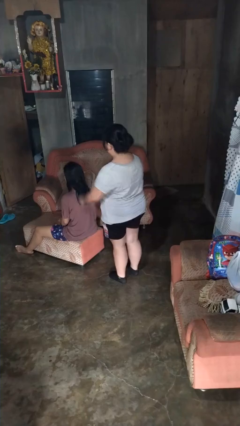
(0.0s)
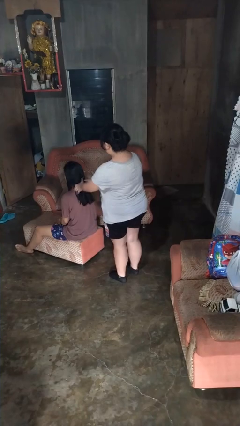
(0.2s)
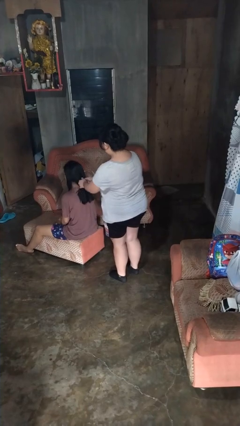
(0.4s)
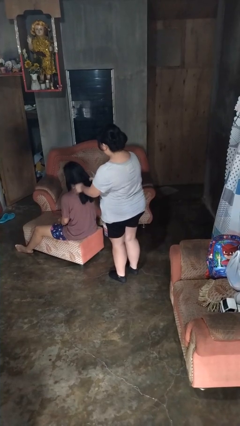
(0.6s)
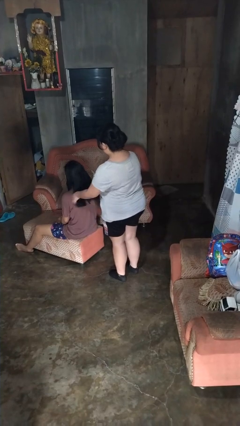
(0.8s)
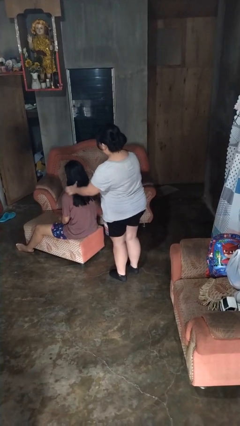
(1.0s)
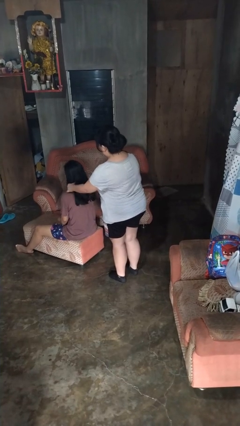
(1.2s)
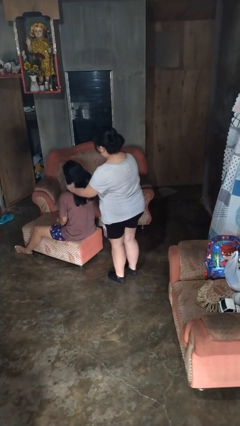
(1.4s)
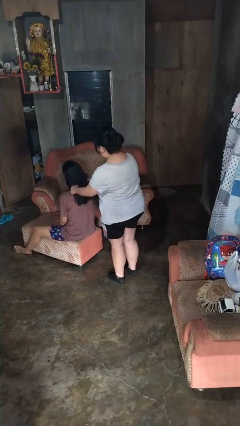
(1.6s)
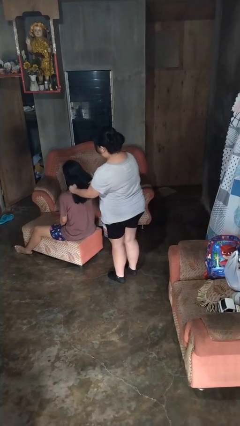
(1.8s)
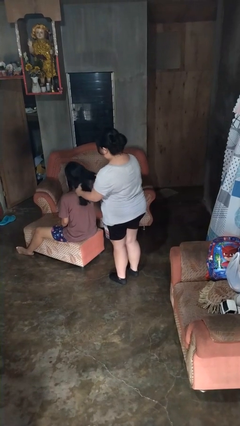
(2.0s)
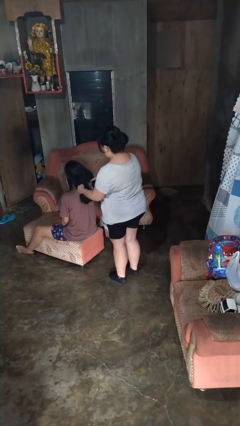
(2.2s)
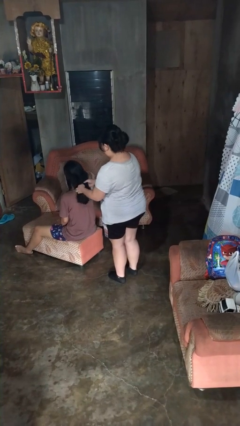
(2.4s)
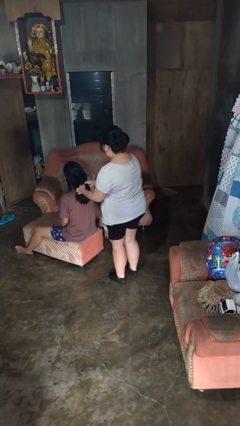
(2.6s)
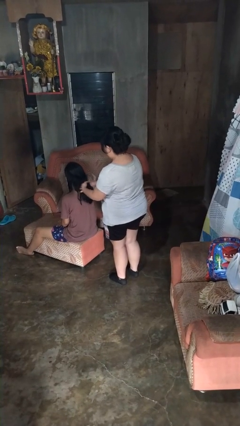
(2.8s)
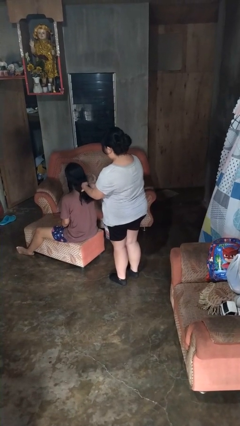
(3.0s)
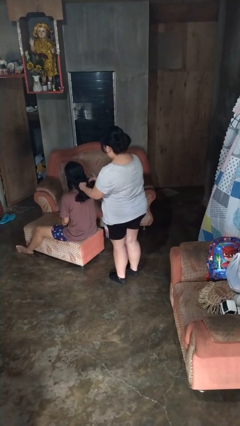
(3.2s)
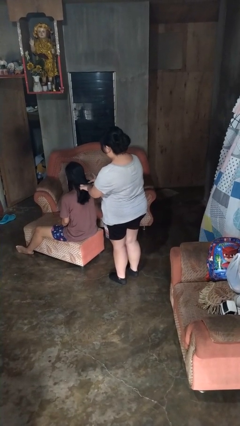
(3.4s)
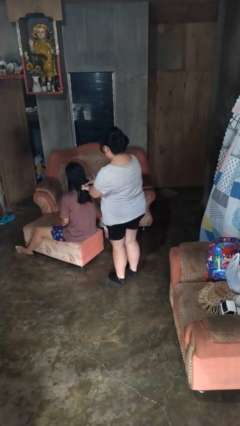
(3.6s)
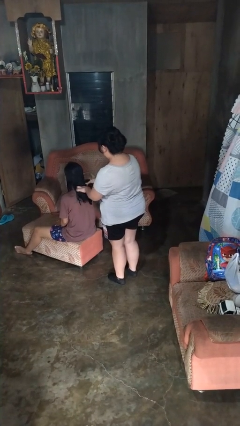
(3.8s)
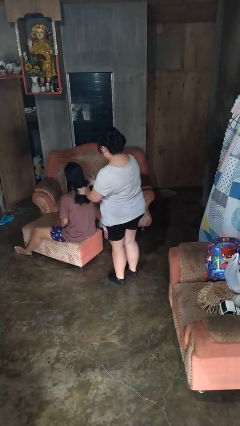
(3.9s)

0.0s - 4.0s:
person braids hair of person

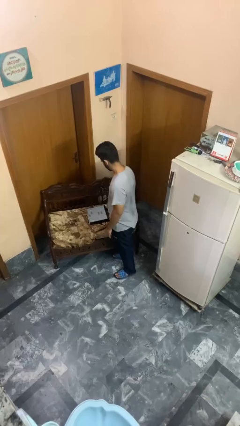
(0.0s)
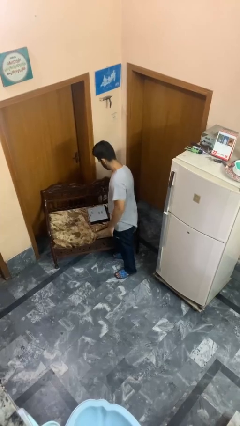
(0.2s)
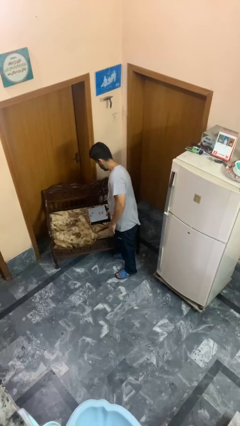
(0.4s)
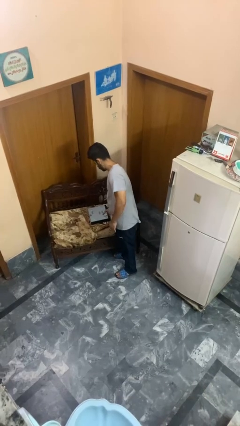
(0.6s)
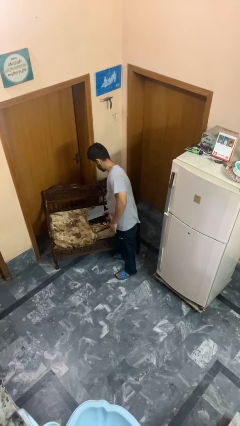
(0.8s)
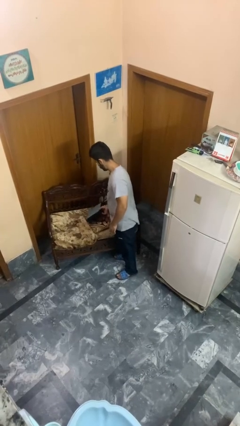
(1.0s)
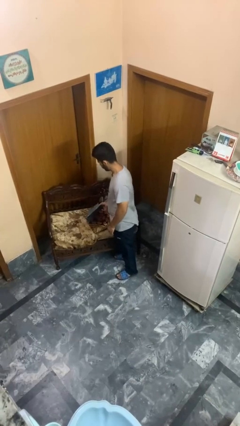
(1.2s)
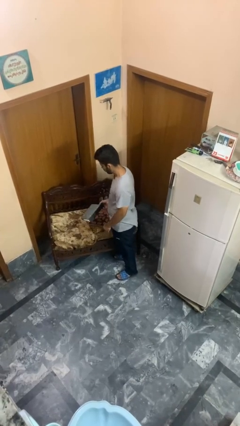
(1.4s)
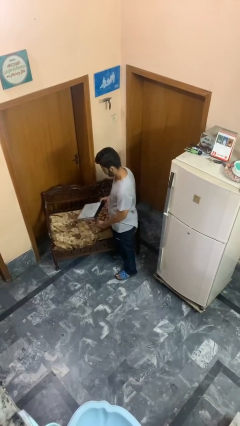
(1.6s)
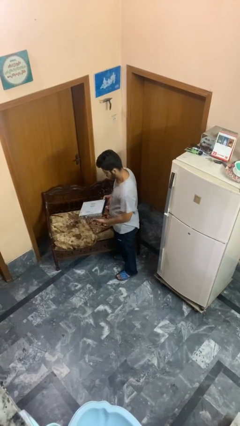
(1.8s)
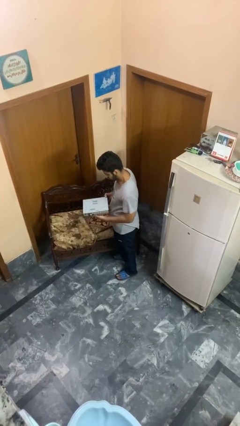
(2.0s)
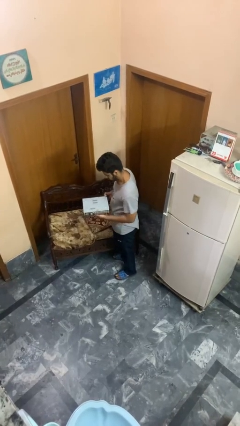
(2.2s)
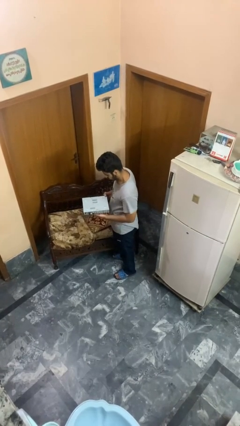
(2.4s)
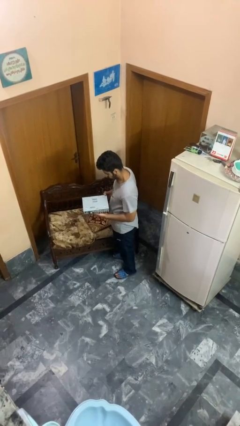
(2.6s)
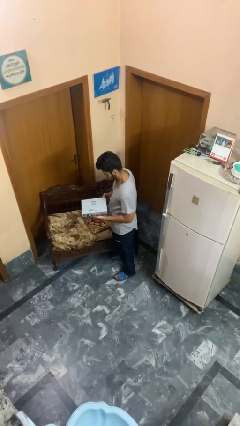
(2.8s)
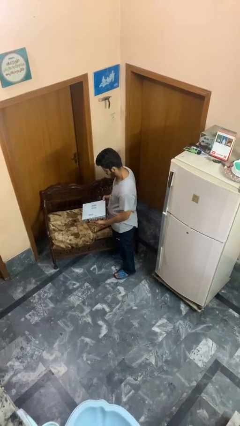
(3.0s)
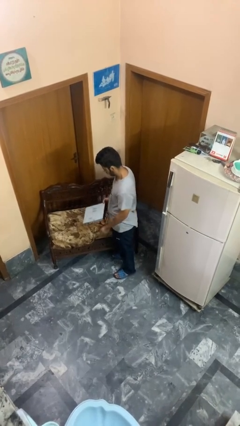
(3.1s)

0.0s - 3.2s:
person picks up object from couch

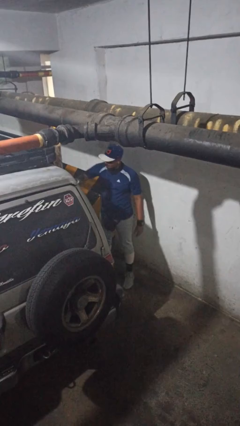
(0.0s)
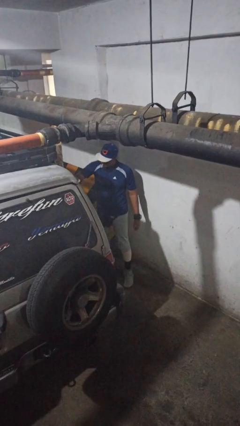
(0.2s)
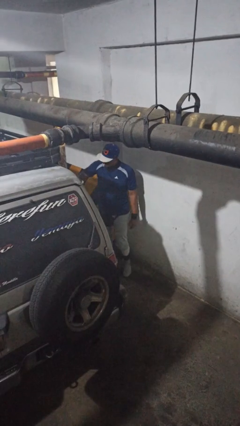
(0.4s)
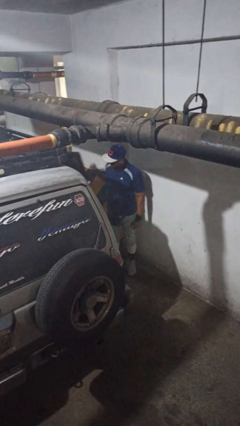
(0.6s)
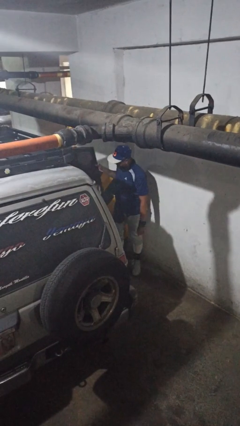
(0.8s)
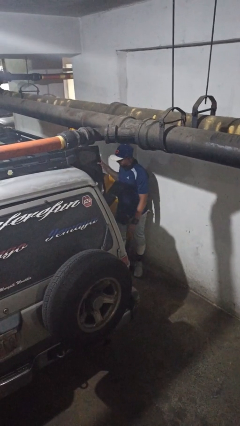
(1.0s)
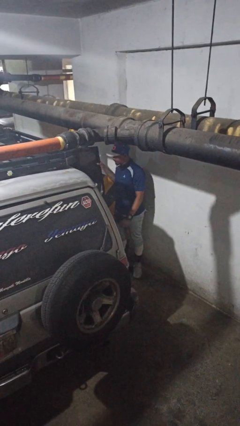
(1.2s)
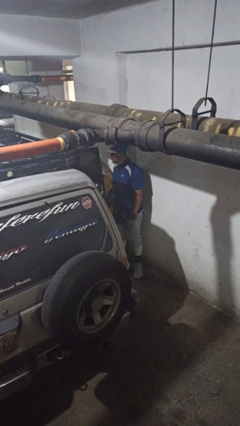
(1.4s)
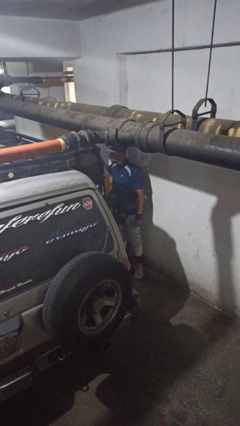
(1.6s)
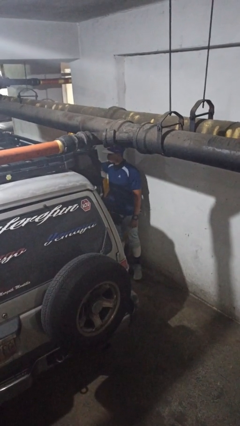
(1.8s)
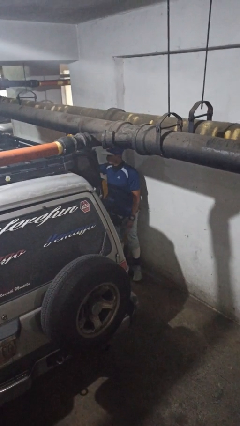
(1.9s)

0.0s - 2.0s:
person opens car door

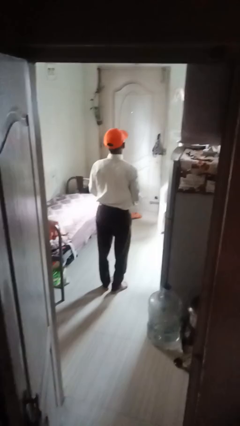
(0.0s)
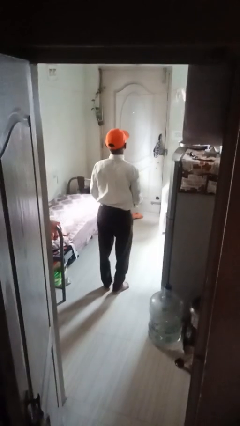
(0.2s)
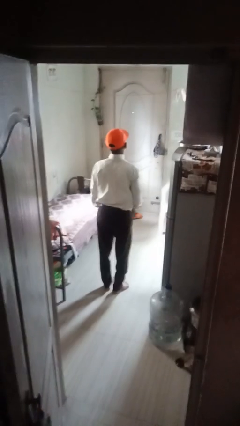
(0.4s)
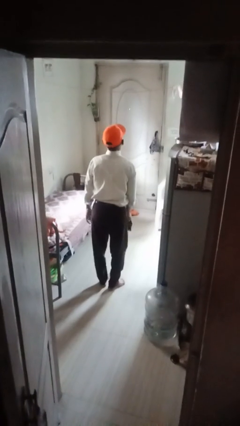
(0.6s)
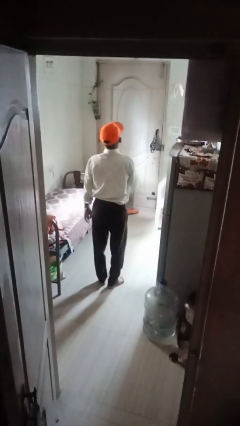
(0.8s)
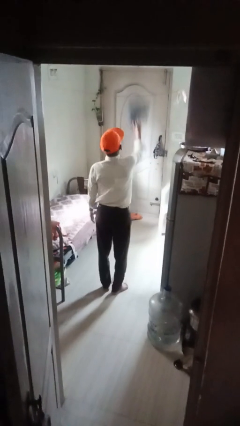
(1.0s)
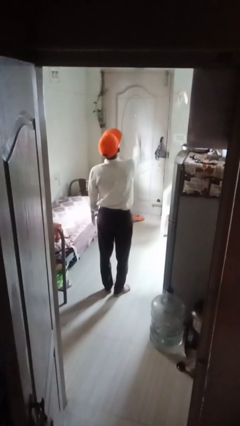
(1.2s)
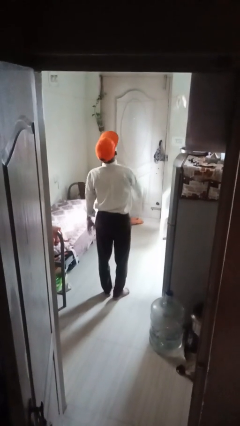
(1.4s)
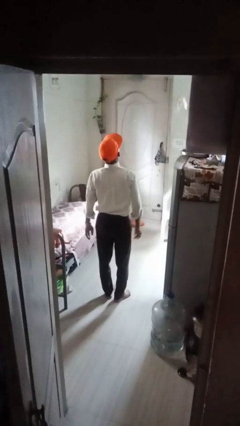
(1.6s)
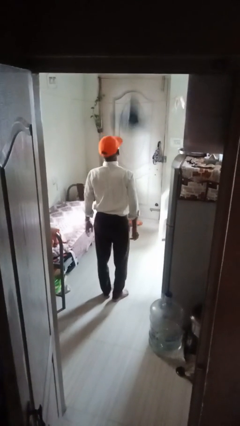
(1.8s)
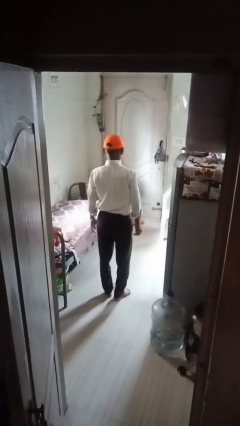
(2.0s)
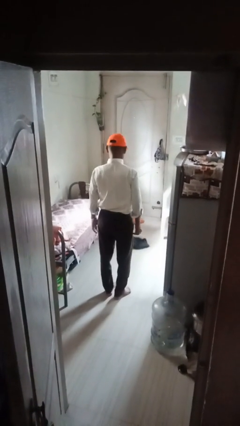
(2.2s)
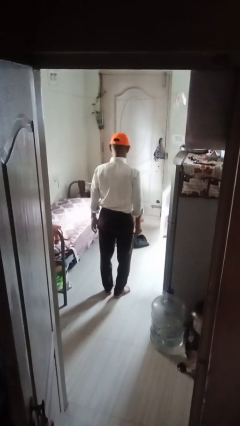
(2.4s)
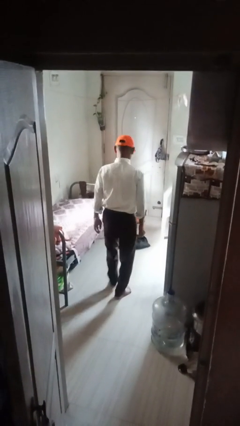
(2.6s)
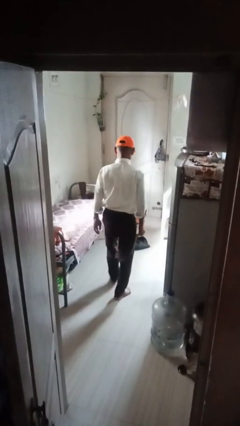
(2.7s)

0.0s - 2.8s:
person throws object into air

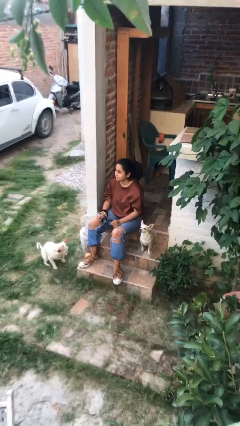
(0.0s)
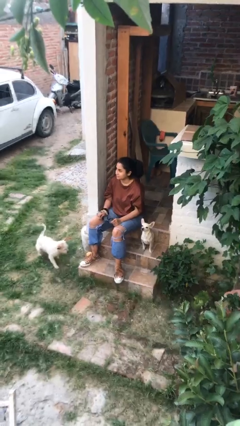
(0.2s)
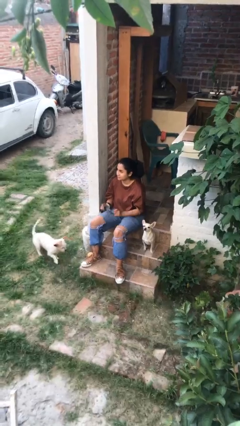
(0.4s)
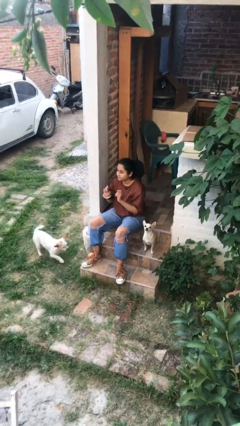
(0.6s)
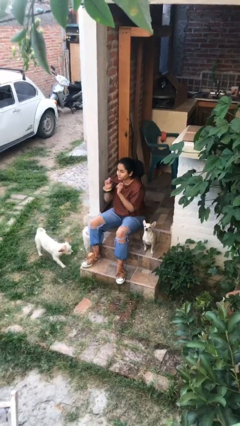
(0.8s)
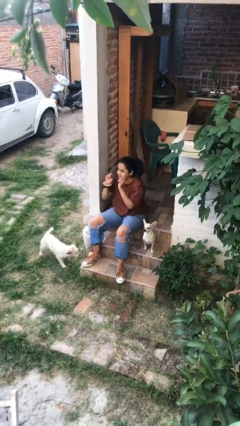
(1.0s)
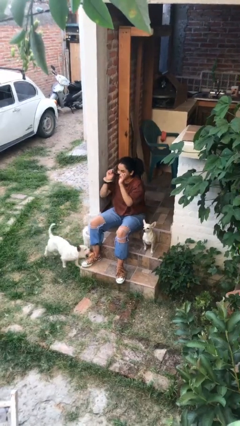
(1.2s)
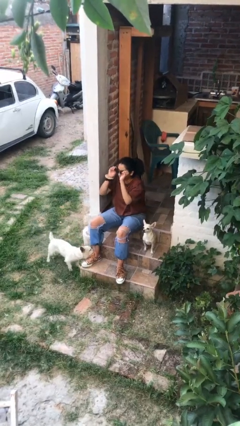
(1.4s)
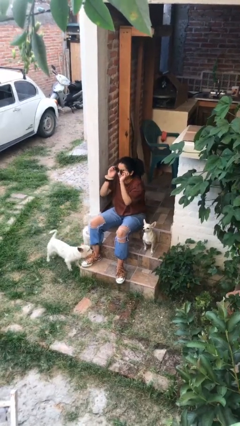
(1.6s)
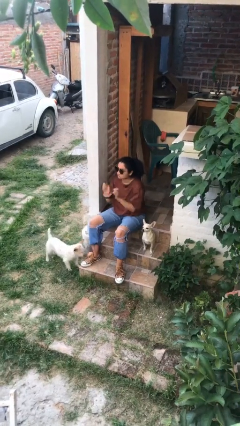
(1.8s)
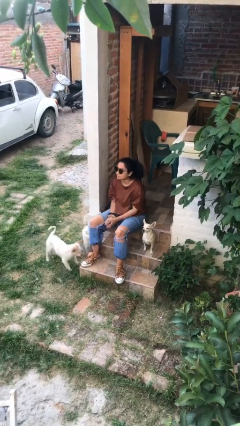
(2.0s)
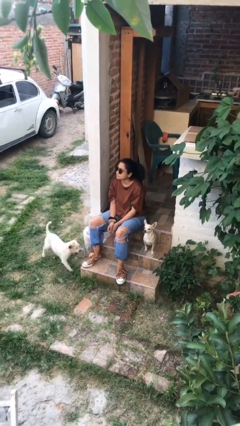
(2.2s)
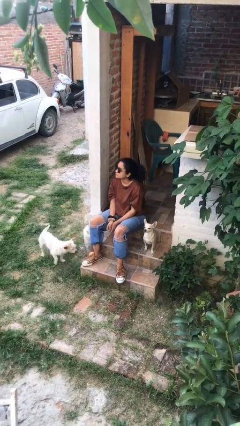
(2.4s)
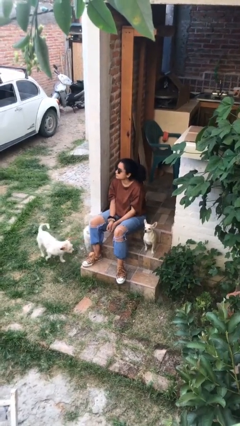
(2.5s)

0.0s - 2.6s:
person puts on sunglasses

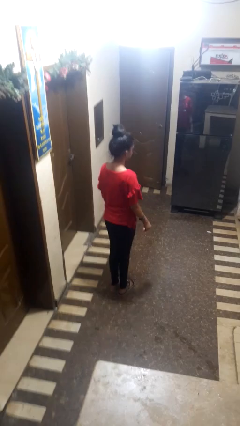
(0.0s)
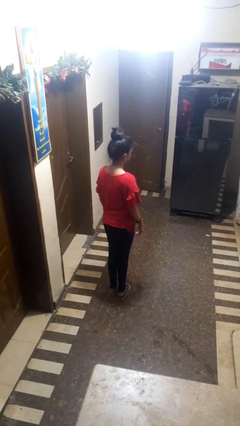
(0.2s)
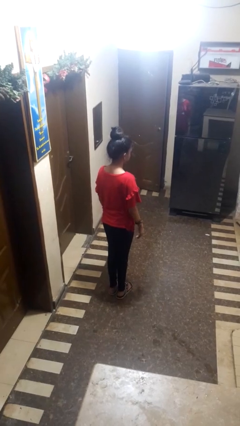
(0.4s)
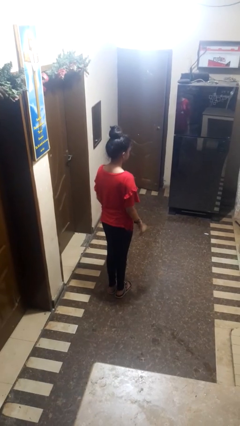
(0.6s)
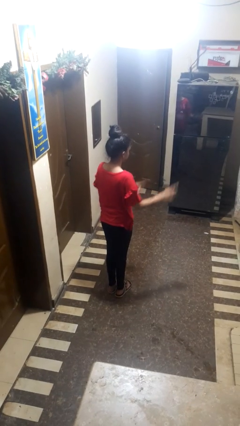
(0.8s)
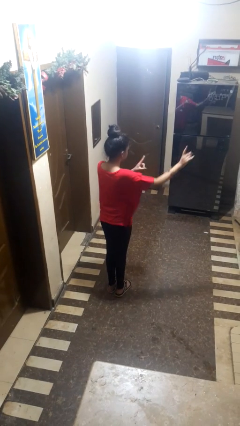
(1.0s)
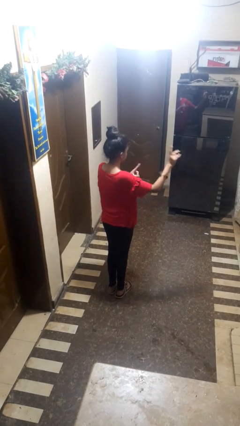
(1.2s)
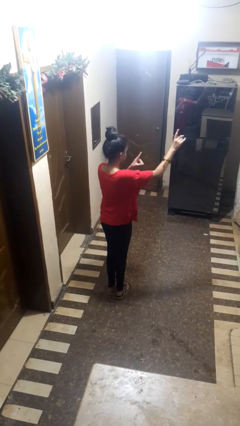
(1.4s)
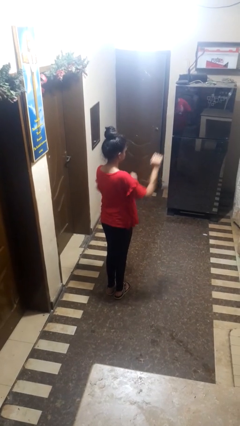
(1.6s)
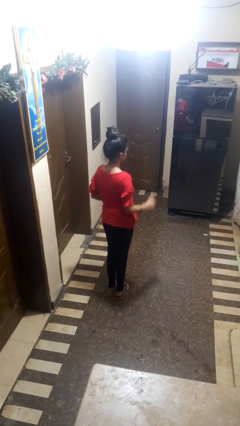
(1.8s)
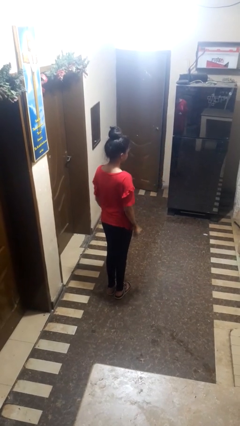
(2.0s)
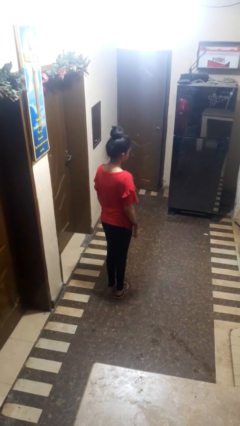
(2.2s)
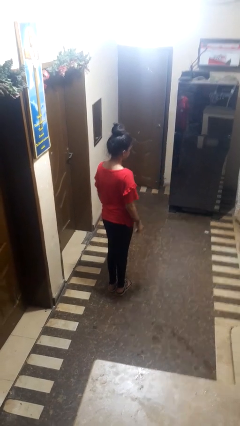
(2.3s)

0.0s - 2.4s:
person dances in place

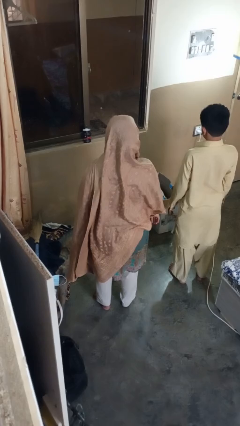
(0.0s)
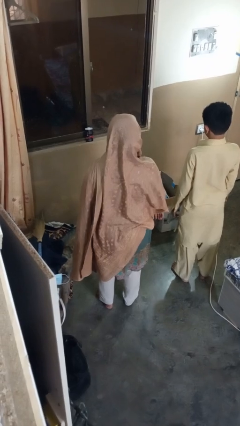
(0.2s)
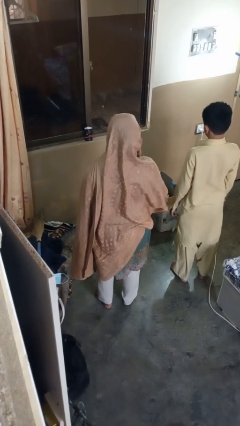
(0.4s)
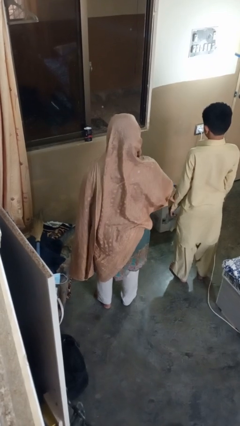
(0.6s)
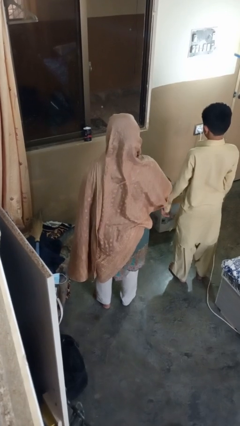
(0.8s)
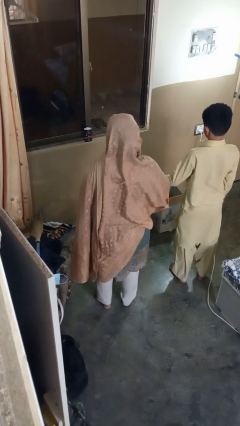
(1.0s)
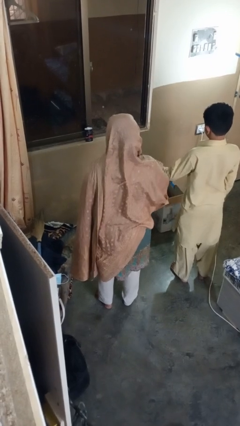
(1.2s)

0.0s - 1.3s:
person grabs person by forearm
